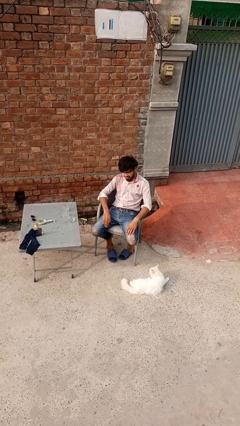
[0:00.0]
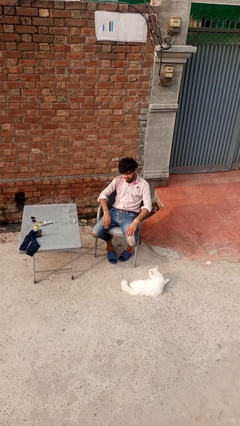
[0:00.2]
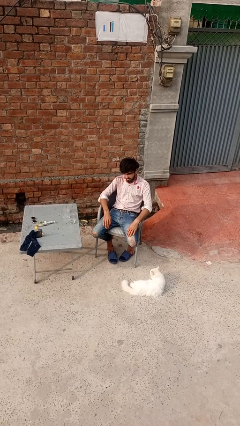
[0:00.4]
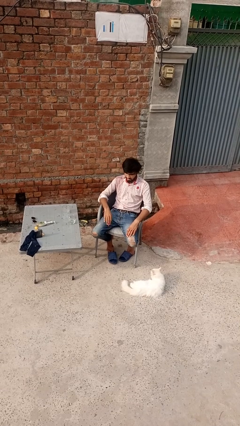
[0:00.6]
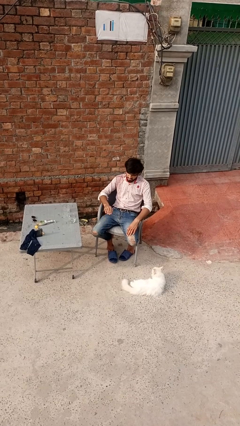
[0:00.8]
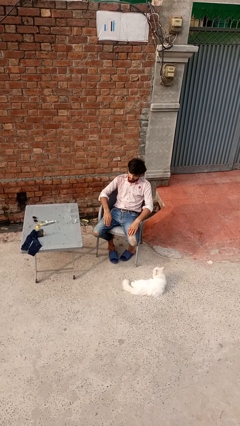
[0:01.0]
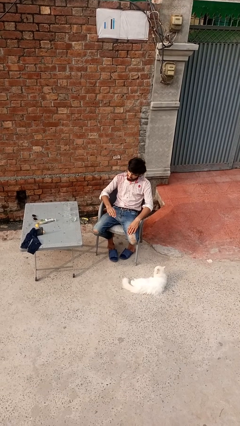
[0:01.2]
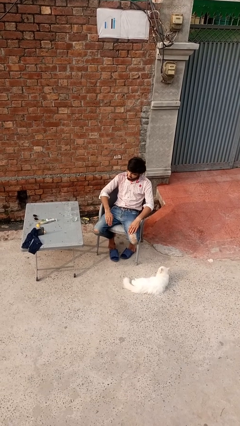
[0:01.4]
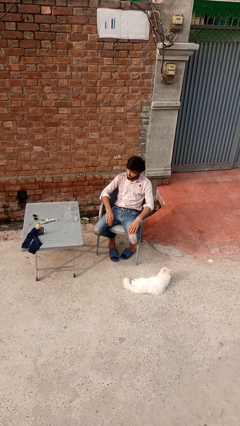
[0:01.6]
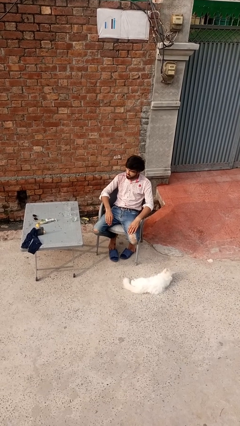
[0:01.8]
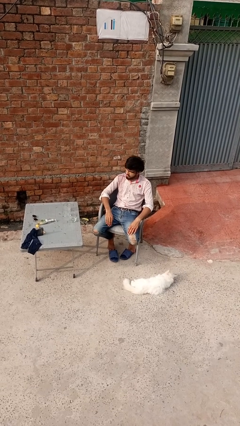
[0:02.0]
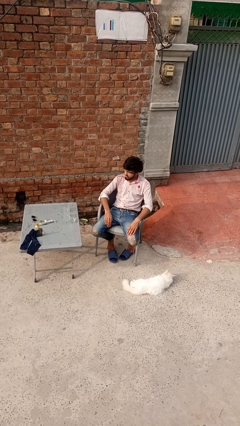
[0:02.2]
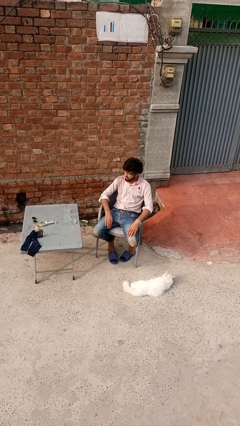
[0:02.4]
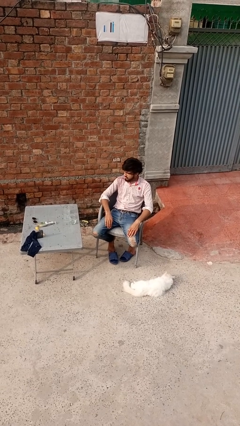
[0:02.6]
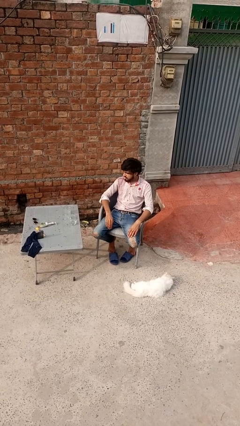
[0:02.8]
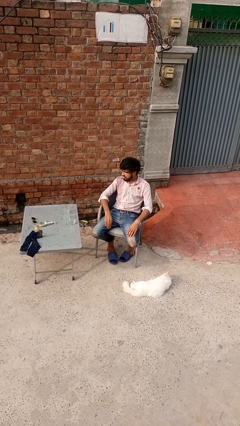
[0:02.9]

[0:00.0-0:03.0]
person slaps hands on thighs

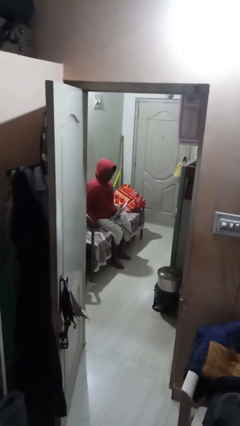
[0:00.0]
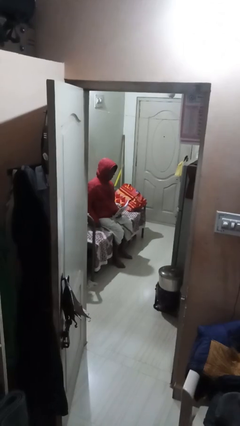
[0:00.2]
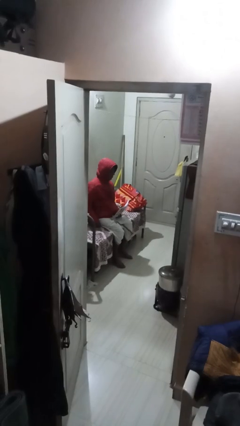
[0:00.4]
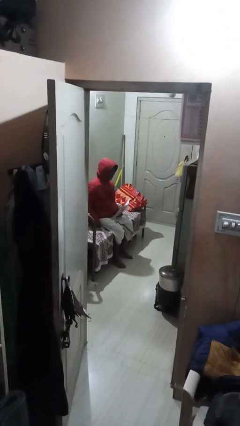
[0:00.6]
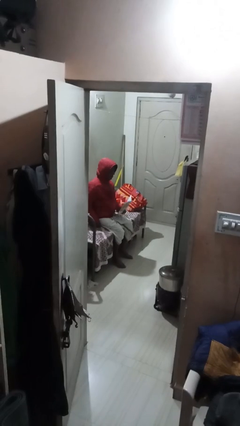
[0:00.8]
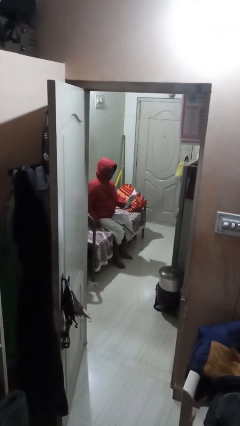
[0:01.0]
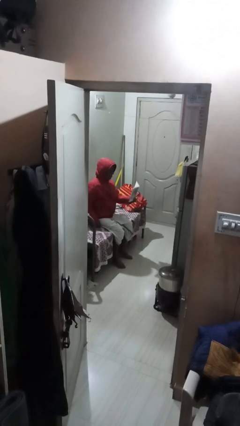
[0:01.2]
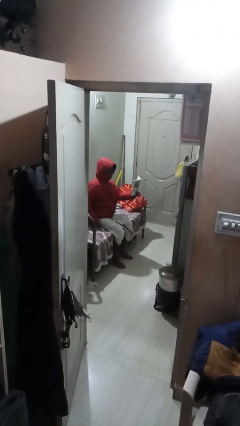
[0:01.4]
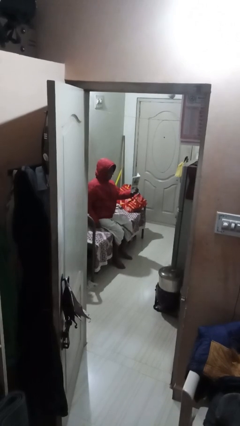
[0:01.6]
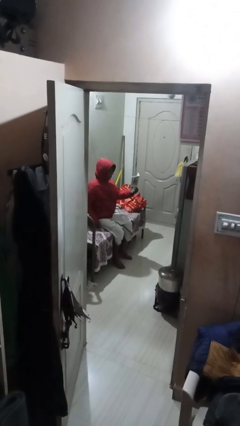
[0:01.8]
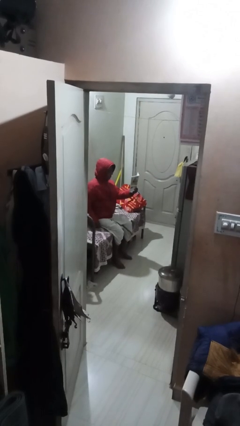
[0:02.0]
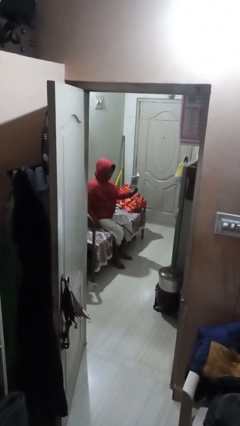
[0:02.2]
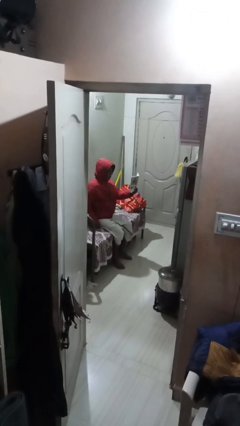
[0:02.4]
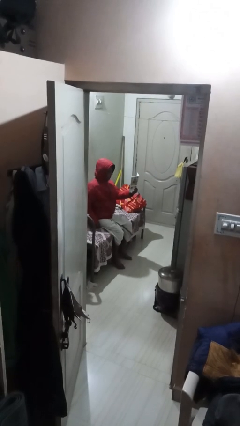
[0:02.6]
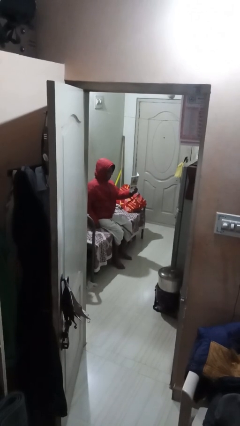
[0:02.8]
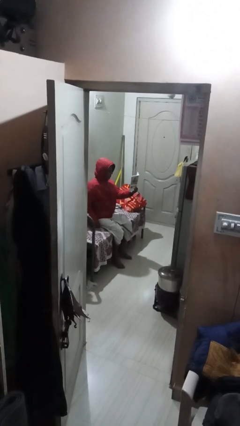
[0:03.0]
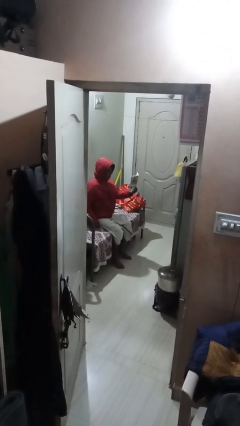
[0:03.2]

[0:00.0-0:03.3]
person reads document

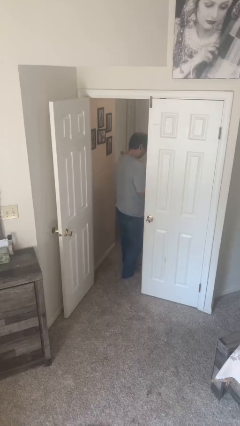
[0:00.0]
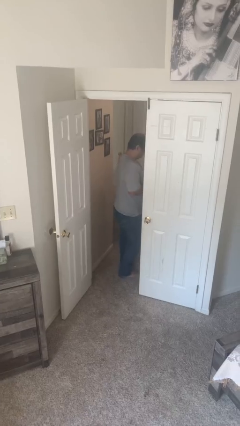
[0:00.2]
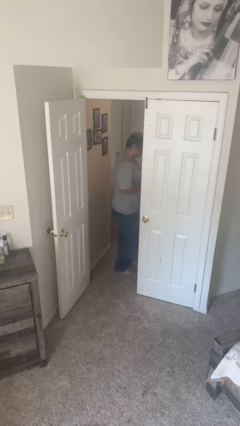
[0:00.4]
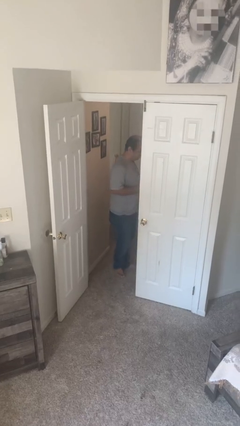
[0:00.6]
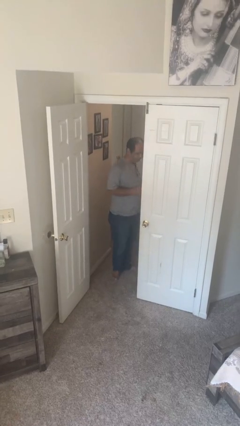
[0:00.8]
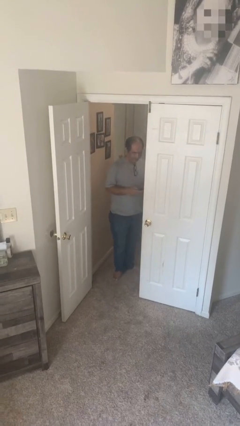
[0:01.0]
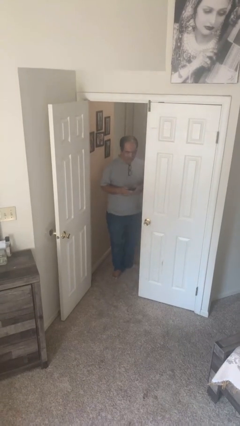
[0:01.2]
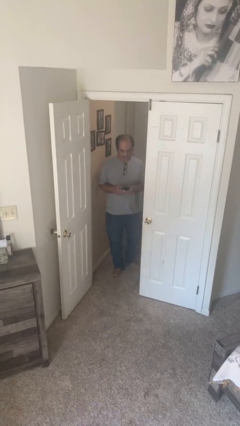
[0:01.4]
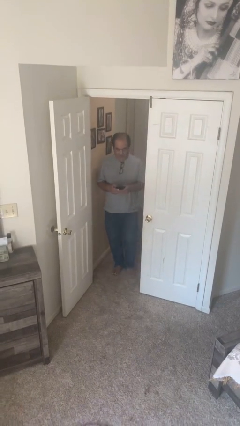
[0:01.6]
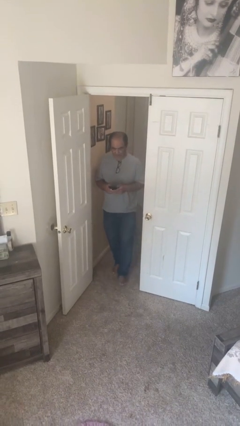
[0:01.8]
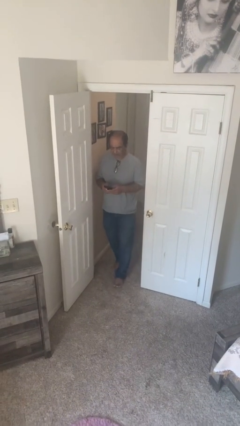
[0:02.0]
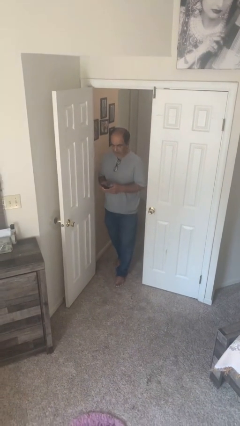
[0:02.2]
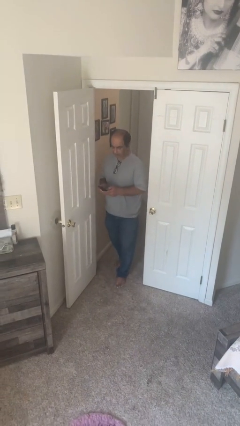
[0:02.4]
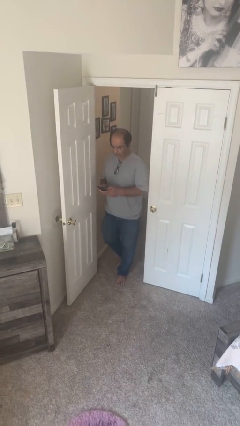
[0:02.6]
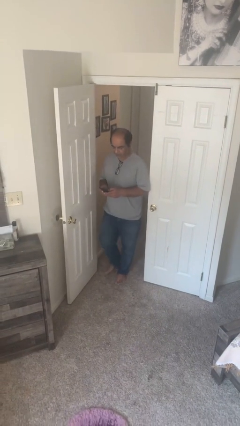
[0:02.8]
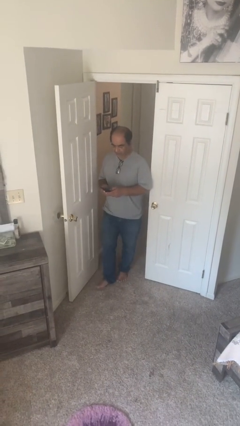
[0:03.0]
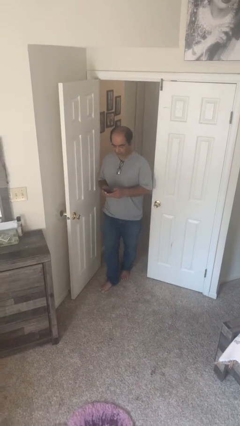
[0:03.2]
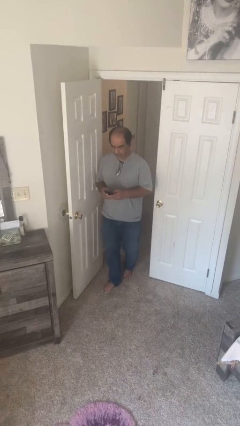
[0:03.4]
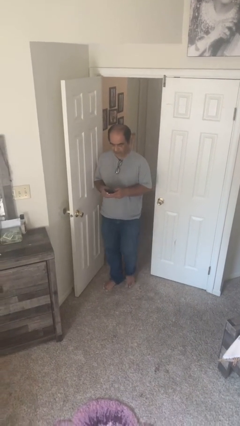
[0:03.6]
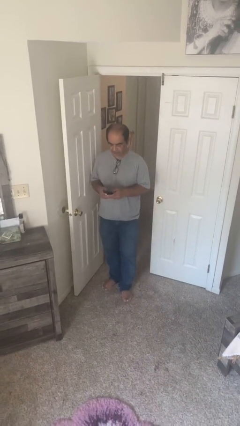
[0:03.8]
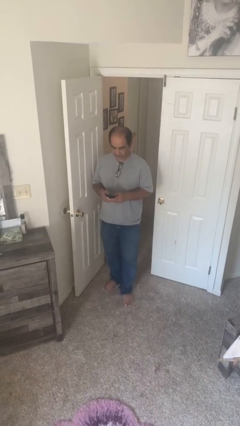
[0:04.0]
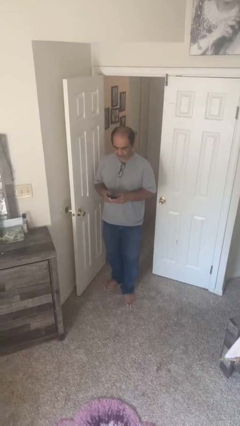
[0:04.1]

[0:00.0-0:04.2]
person enters scene through structure

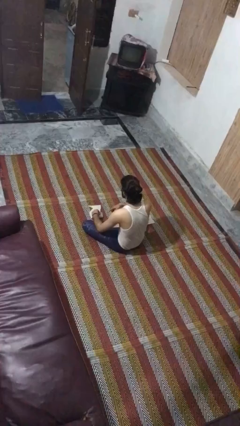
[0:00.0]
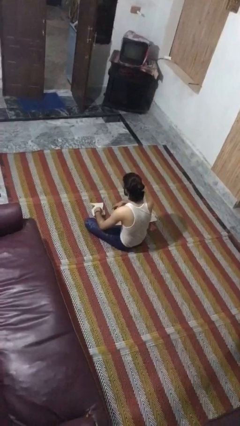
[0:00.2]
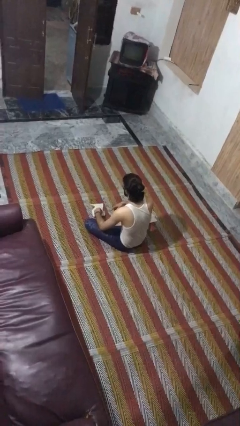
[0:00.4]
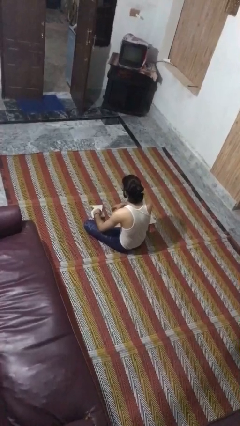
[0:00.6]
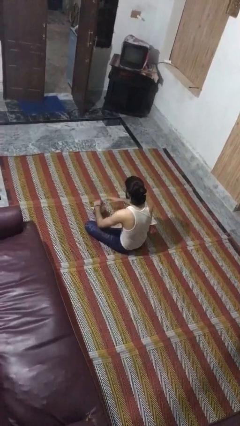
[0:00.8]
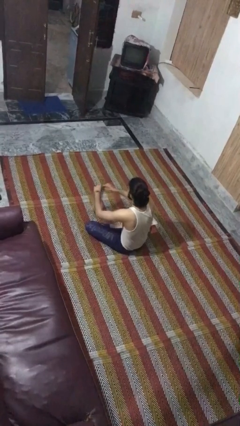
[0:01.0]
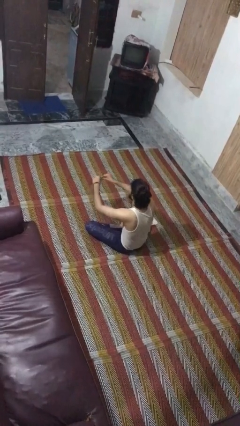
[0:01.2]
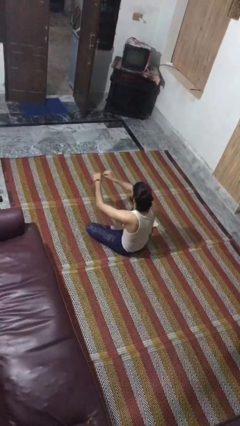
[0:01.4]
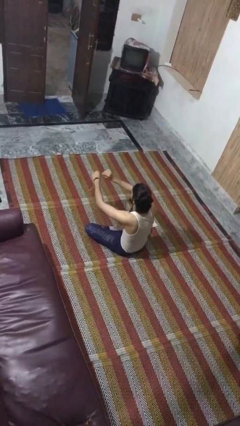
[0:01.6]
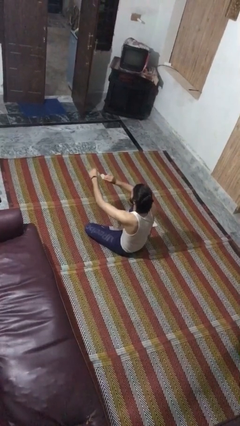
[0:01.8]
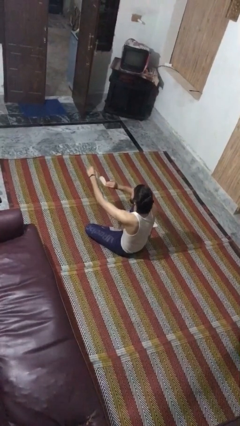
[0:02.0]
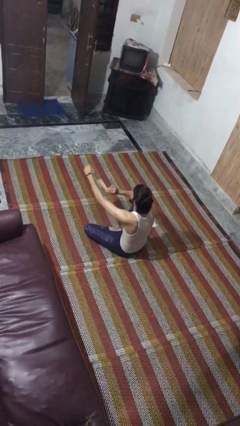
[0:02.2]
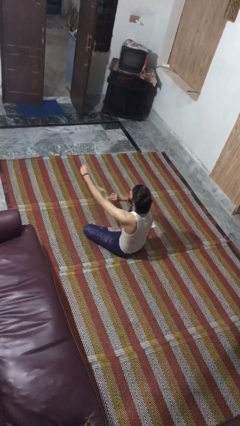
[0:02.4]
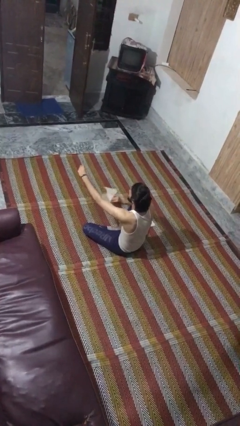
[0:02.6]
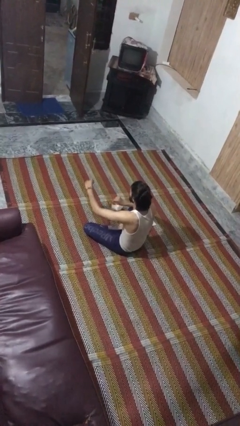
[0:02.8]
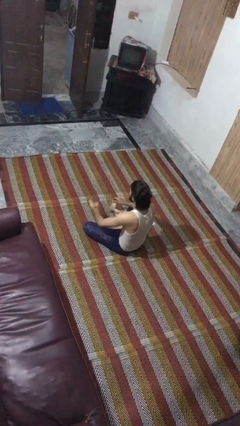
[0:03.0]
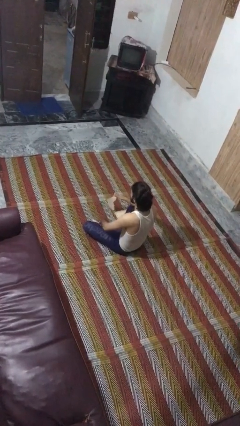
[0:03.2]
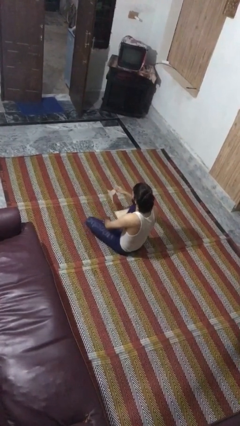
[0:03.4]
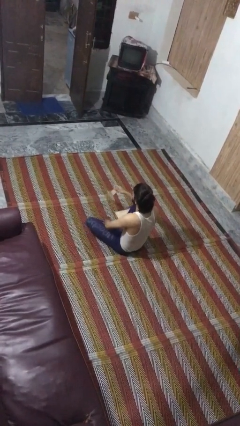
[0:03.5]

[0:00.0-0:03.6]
person tears paper

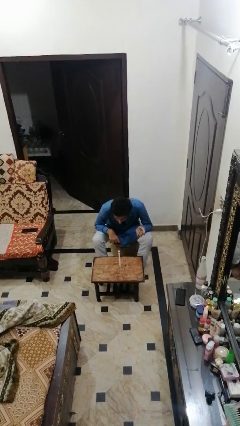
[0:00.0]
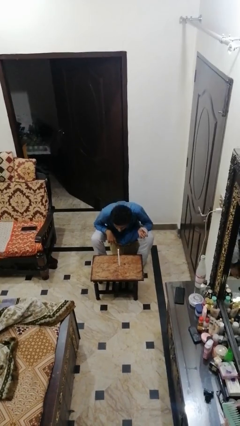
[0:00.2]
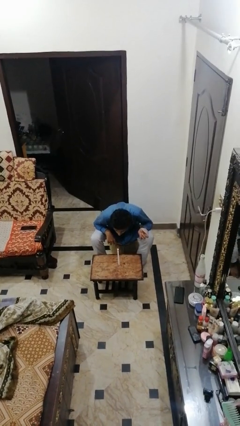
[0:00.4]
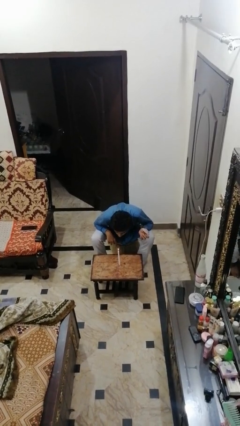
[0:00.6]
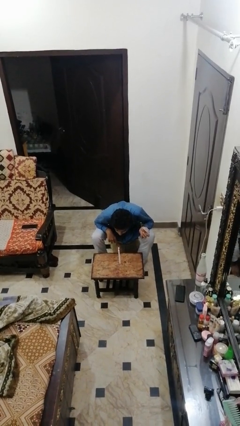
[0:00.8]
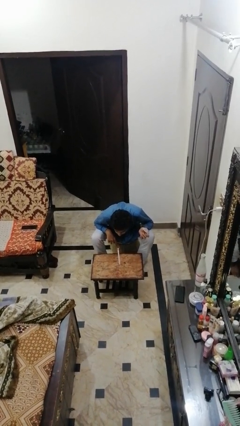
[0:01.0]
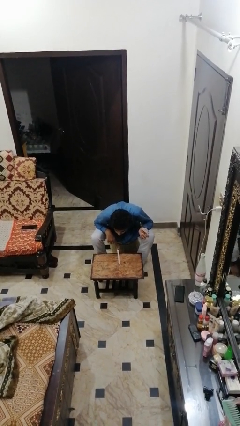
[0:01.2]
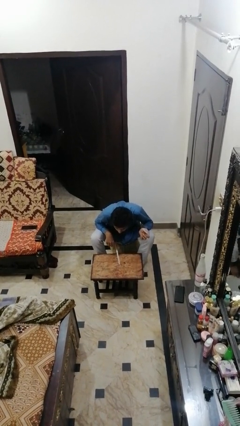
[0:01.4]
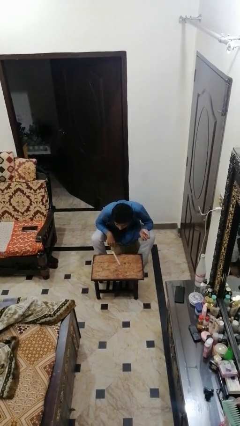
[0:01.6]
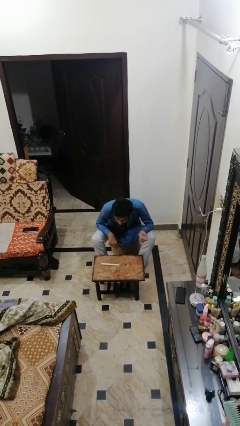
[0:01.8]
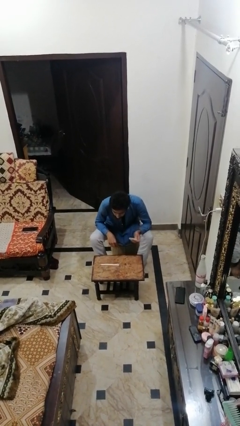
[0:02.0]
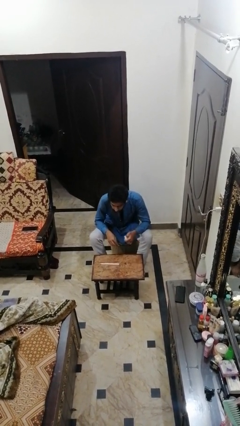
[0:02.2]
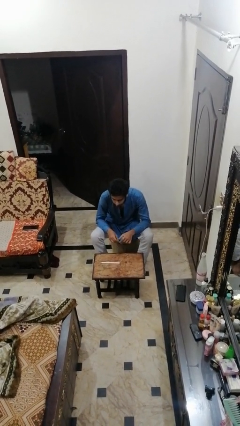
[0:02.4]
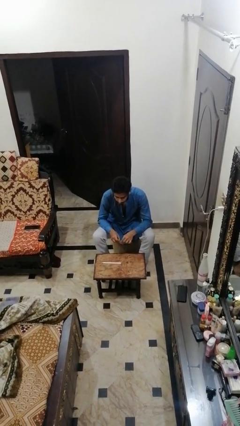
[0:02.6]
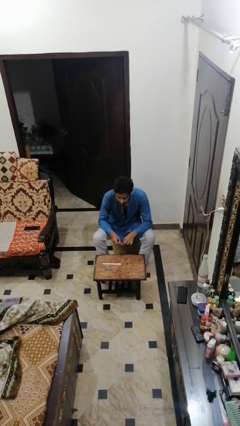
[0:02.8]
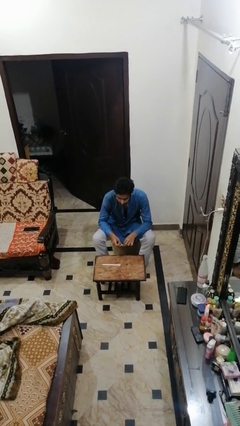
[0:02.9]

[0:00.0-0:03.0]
person extinguishes candle

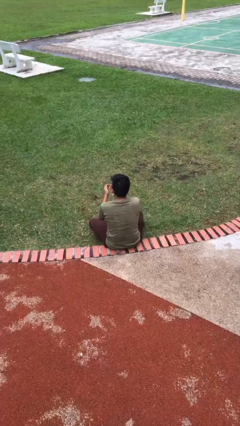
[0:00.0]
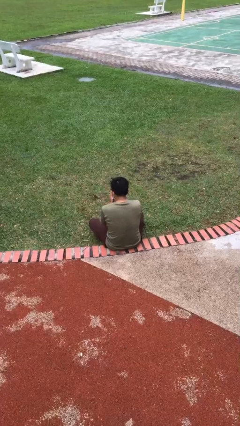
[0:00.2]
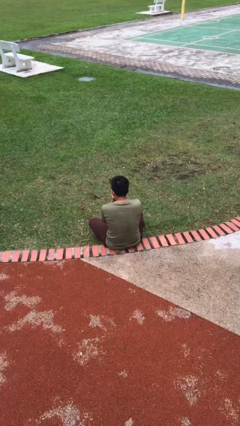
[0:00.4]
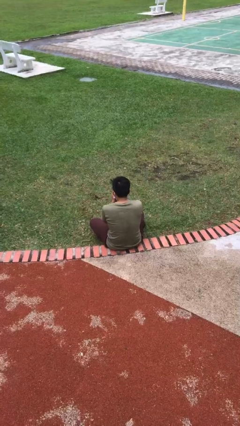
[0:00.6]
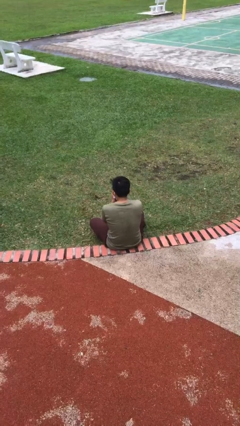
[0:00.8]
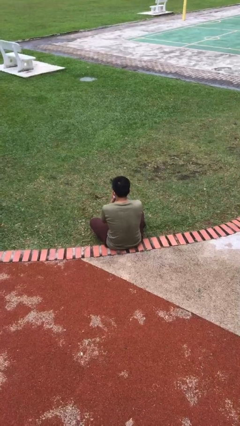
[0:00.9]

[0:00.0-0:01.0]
person sneezes into hand
